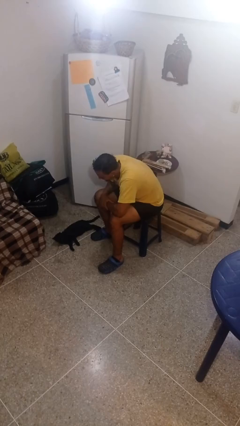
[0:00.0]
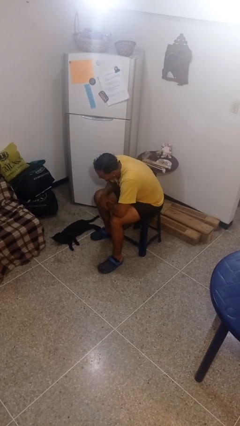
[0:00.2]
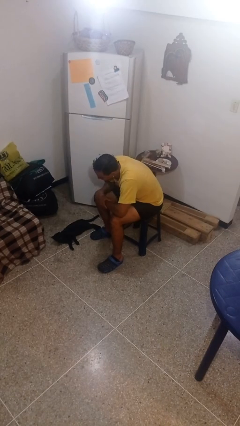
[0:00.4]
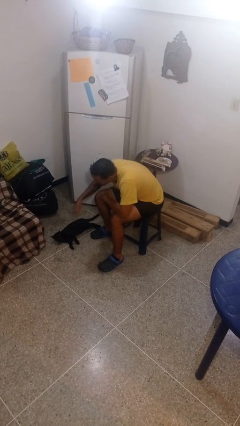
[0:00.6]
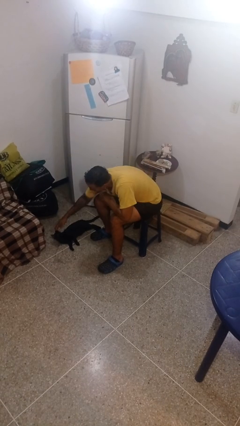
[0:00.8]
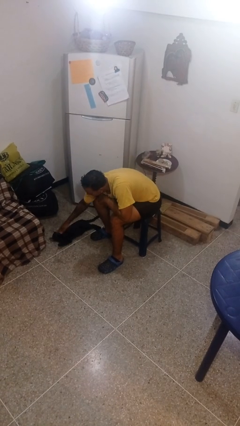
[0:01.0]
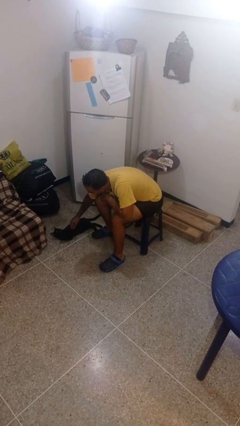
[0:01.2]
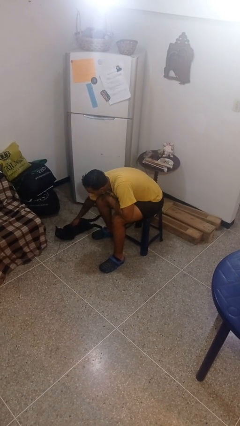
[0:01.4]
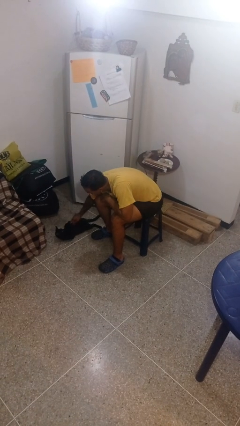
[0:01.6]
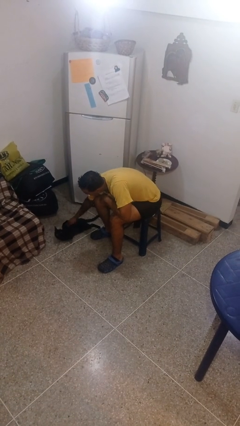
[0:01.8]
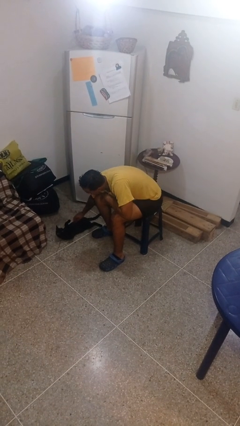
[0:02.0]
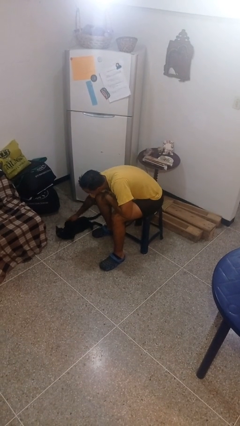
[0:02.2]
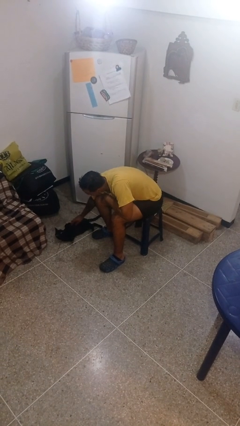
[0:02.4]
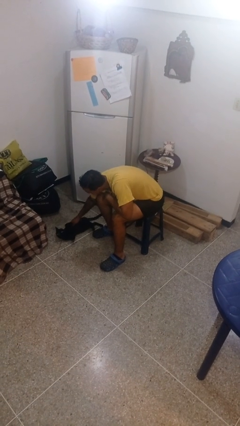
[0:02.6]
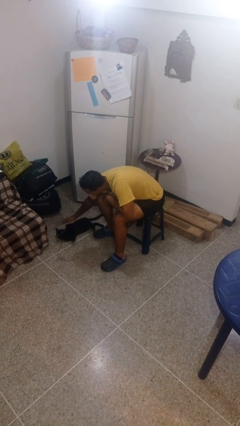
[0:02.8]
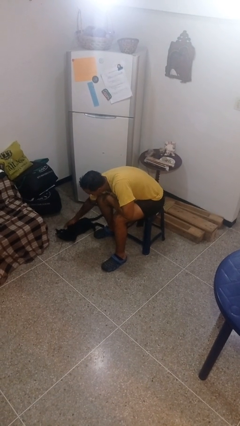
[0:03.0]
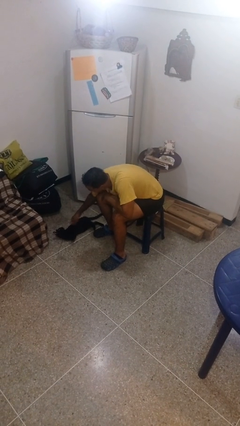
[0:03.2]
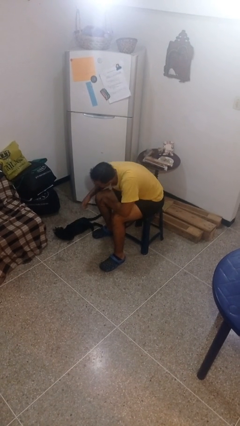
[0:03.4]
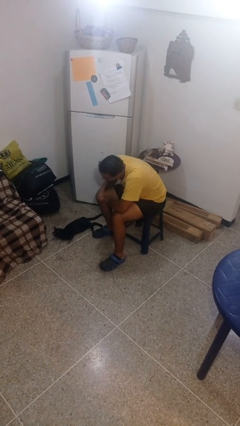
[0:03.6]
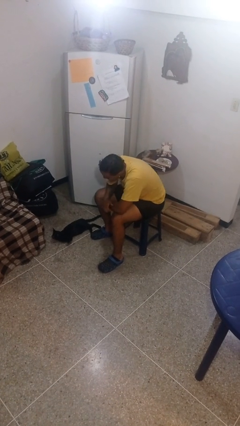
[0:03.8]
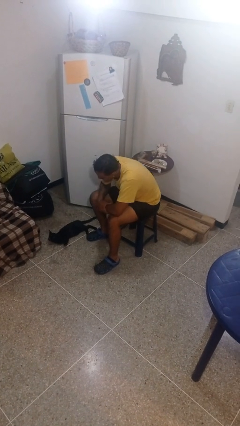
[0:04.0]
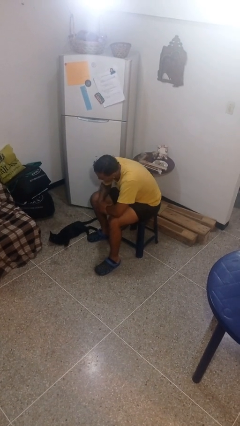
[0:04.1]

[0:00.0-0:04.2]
person pets cat

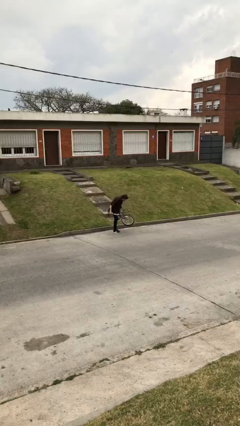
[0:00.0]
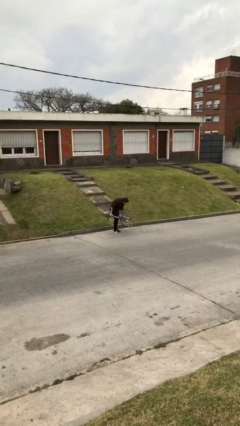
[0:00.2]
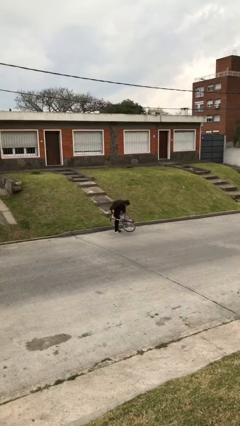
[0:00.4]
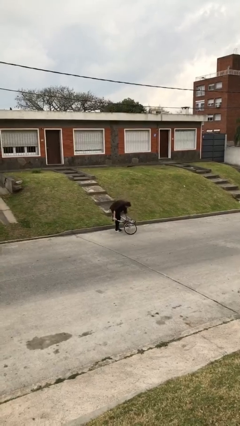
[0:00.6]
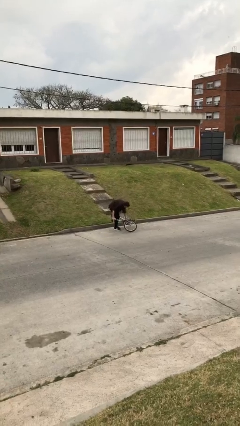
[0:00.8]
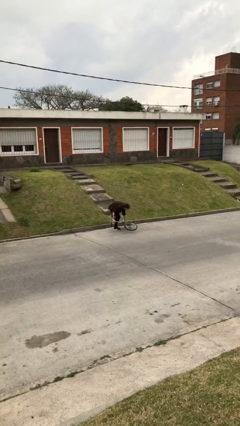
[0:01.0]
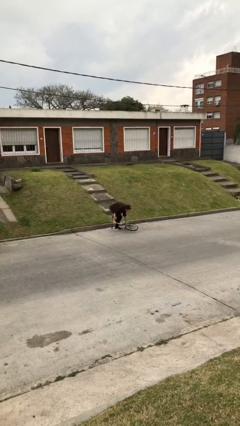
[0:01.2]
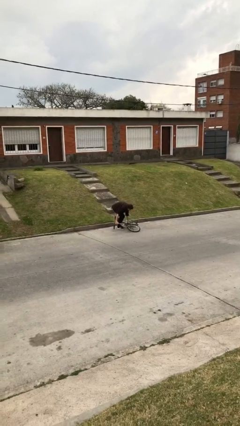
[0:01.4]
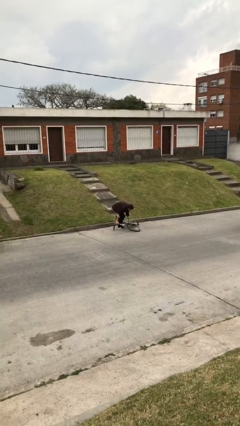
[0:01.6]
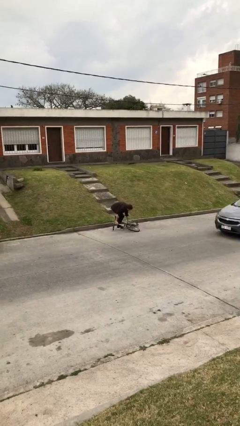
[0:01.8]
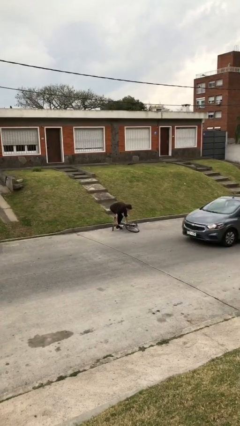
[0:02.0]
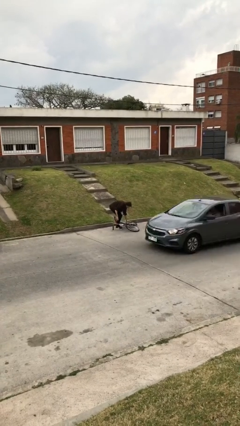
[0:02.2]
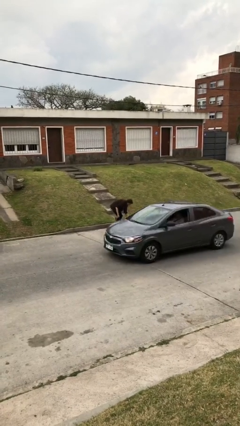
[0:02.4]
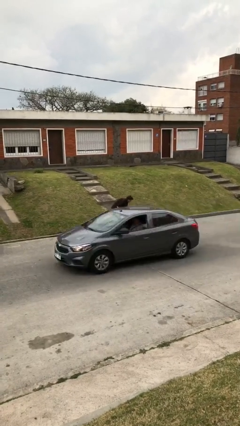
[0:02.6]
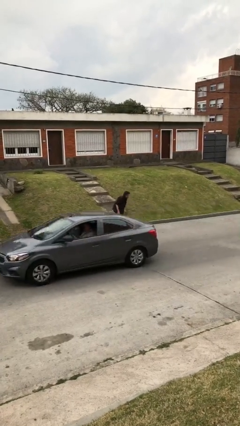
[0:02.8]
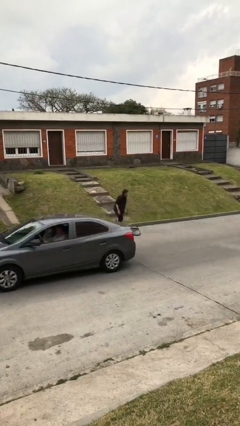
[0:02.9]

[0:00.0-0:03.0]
person puts down object on floor

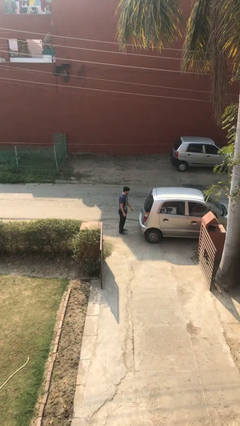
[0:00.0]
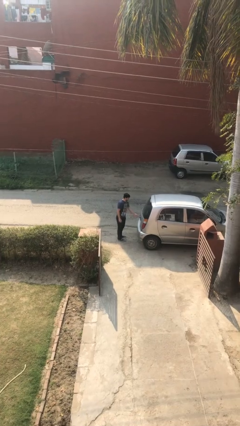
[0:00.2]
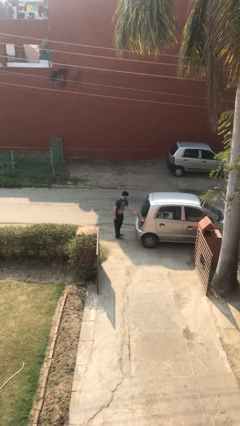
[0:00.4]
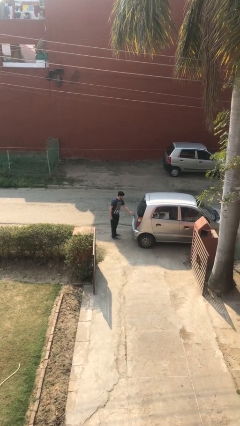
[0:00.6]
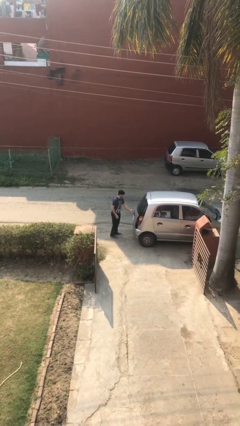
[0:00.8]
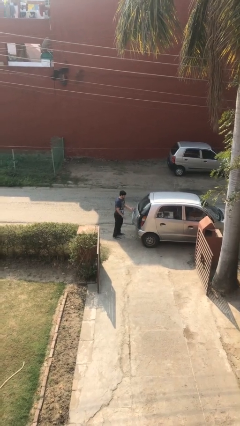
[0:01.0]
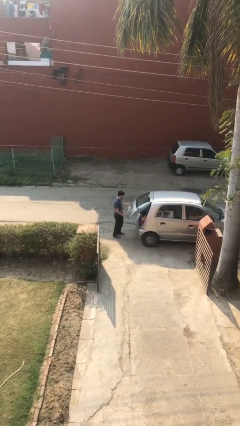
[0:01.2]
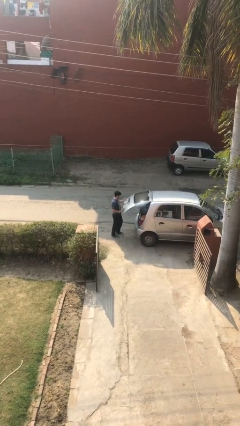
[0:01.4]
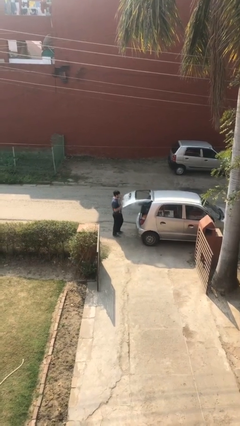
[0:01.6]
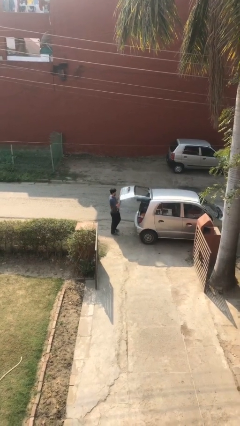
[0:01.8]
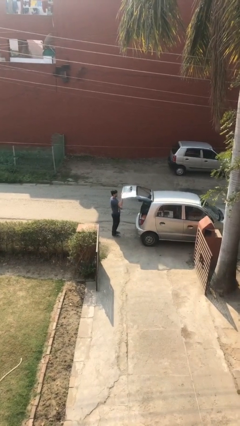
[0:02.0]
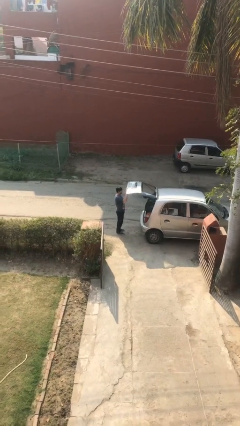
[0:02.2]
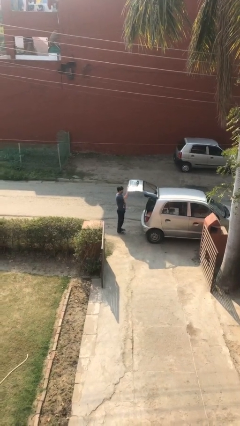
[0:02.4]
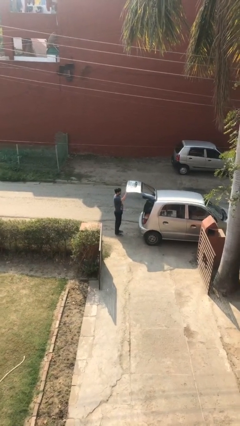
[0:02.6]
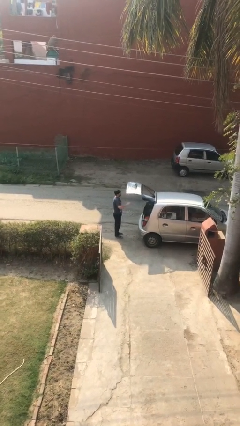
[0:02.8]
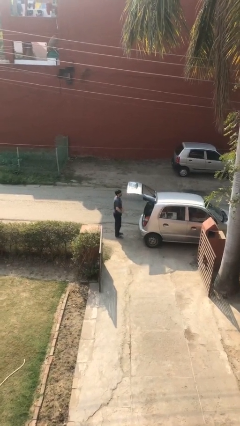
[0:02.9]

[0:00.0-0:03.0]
person opens car trunk

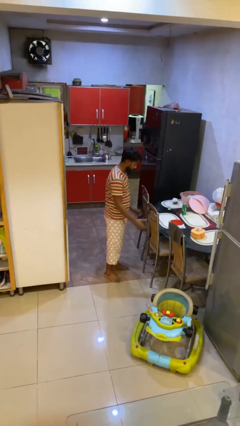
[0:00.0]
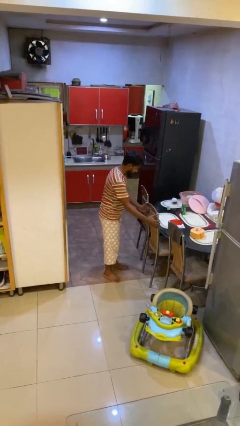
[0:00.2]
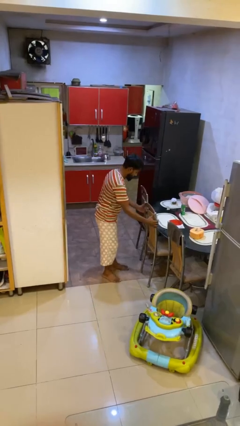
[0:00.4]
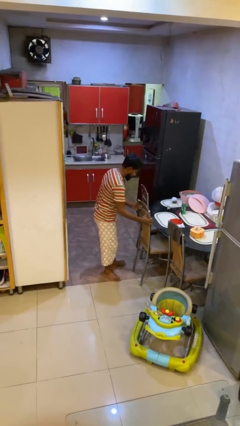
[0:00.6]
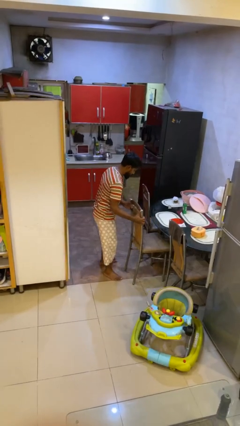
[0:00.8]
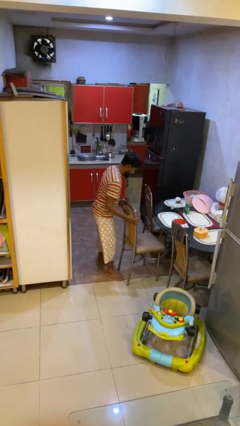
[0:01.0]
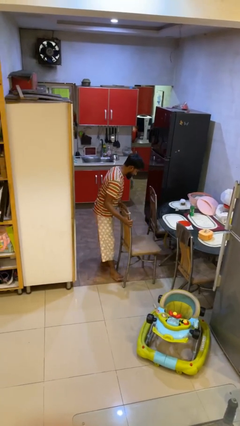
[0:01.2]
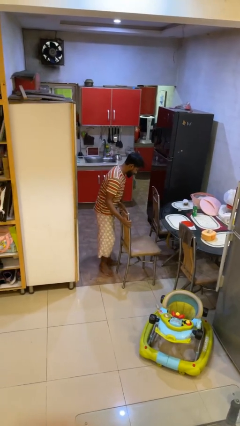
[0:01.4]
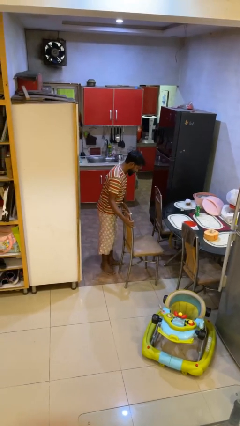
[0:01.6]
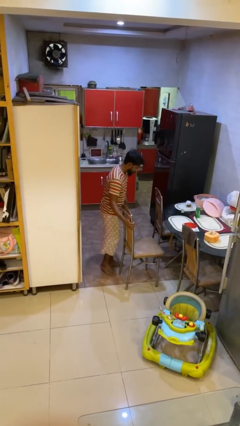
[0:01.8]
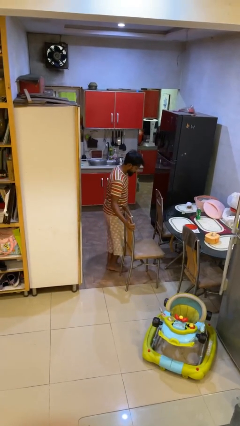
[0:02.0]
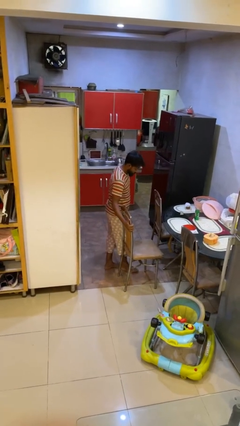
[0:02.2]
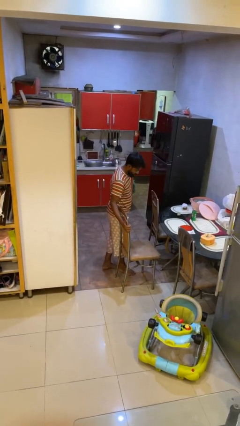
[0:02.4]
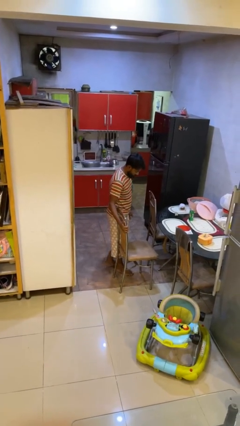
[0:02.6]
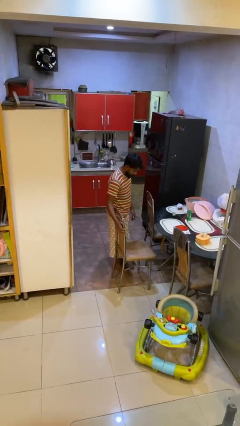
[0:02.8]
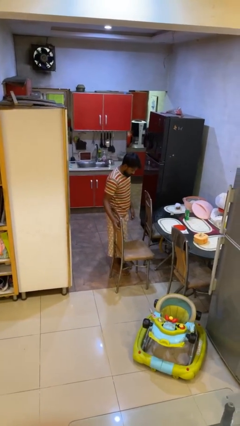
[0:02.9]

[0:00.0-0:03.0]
person pulls out chair

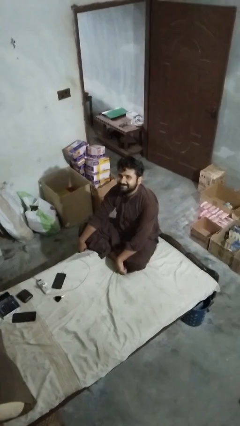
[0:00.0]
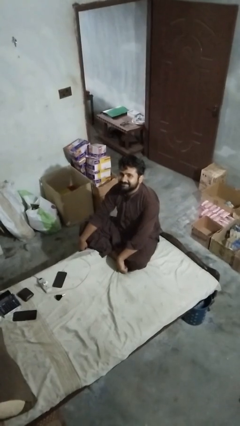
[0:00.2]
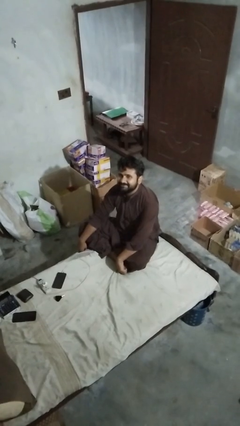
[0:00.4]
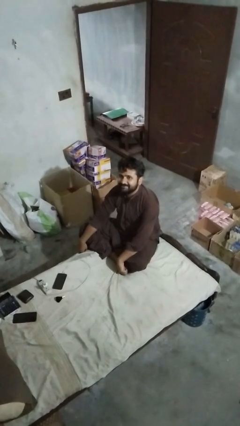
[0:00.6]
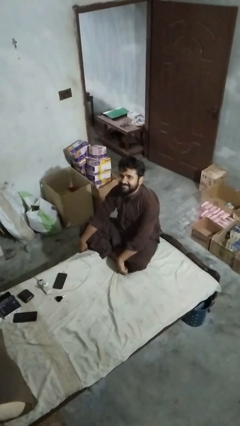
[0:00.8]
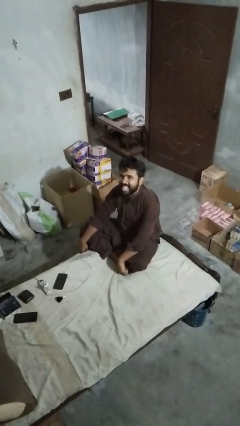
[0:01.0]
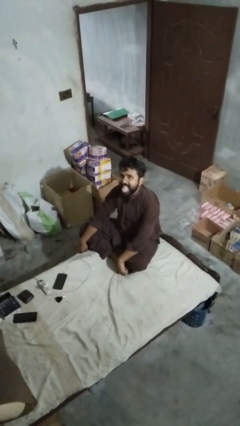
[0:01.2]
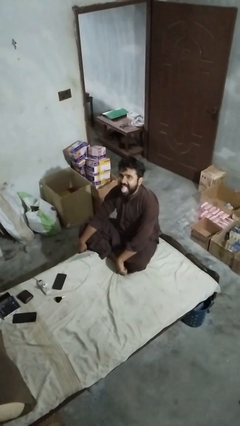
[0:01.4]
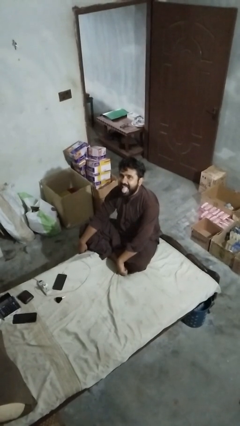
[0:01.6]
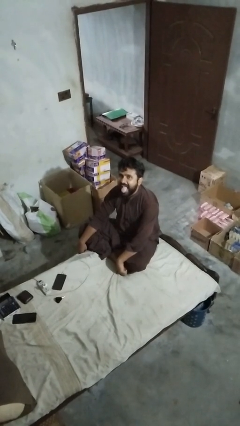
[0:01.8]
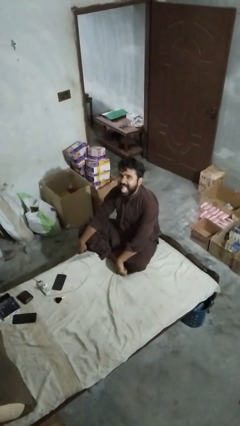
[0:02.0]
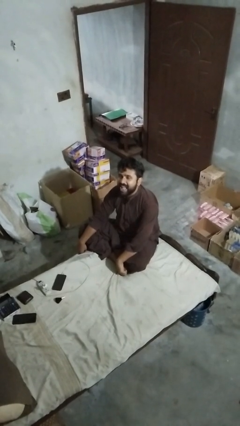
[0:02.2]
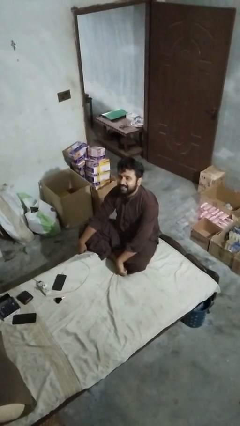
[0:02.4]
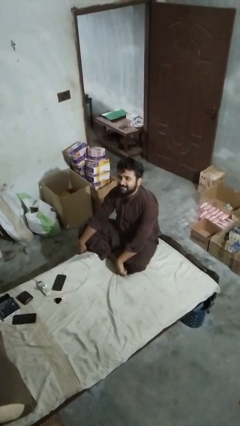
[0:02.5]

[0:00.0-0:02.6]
person sticks out tongue

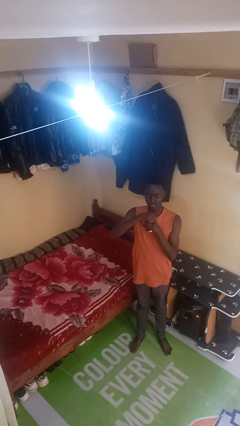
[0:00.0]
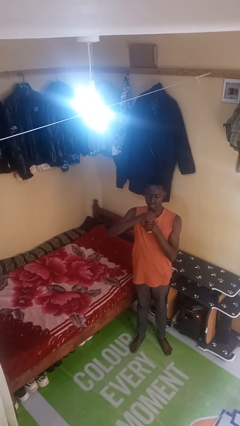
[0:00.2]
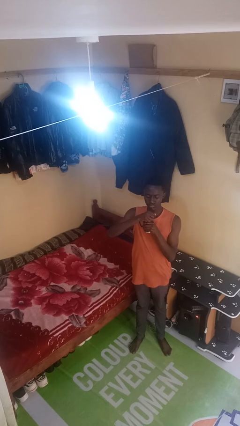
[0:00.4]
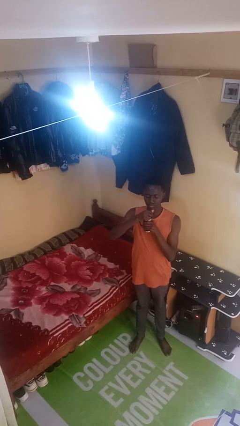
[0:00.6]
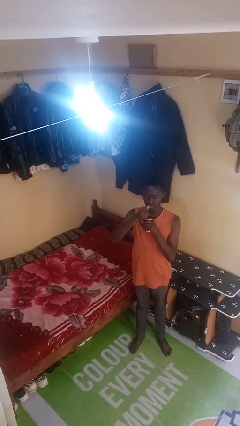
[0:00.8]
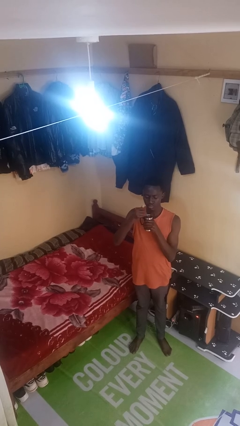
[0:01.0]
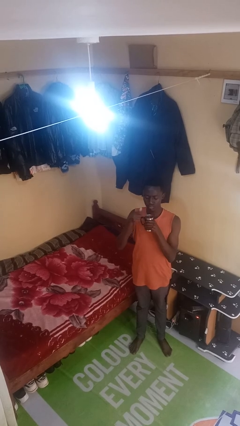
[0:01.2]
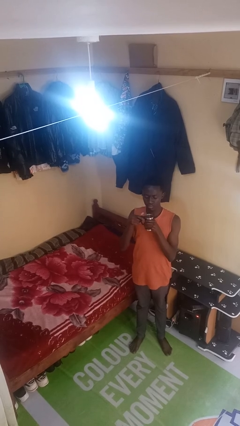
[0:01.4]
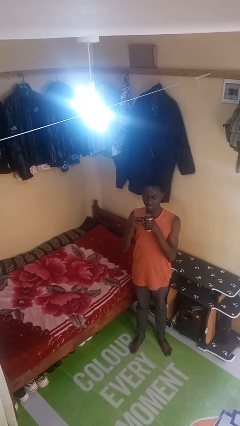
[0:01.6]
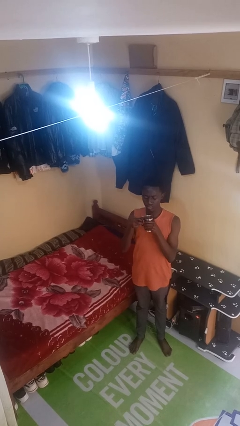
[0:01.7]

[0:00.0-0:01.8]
person opens beverage can
